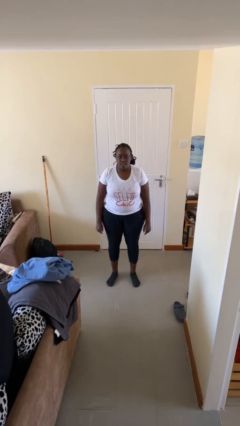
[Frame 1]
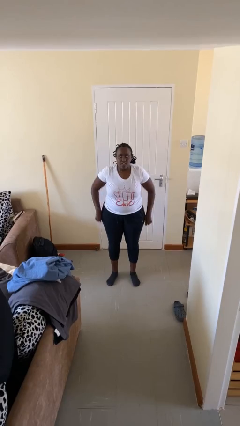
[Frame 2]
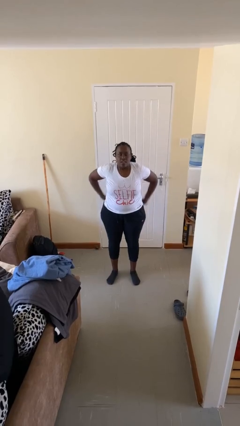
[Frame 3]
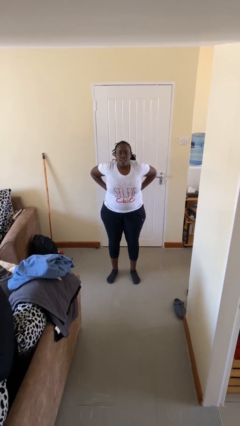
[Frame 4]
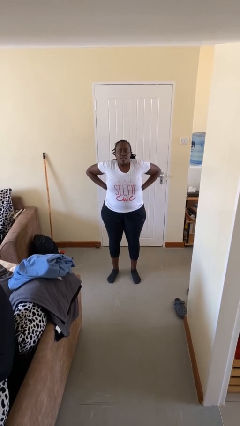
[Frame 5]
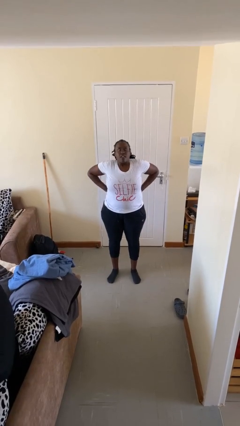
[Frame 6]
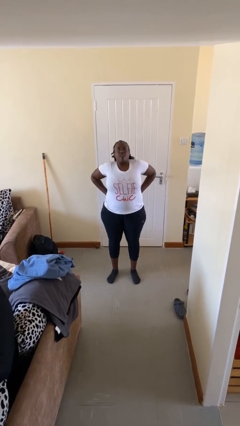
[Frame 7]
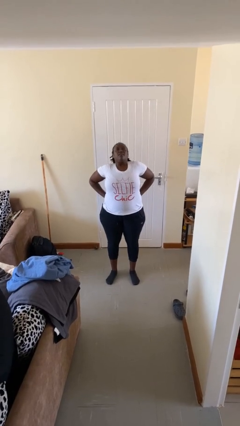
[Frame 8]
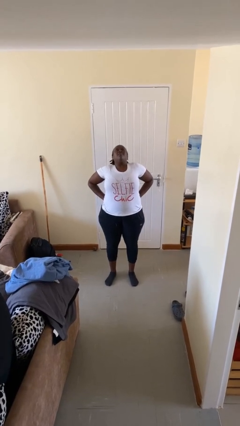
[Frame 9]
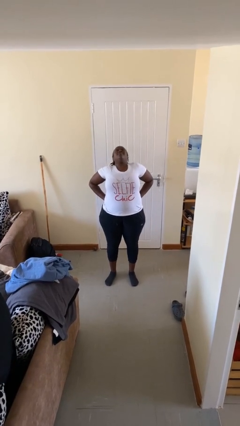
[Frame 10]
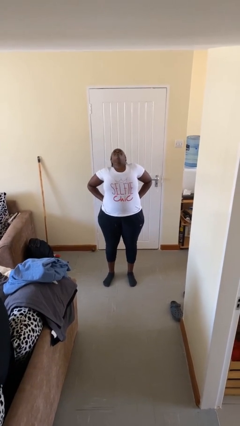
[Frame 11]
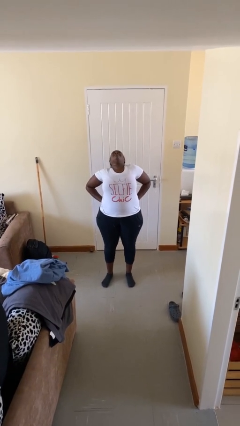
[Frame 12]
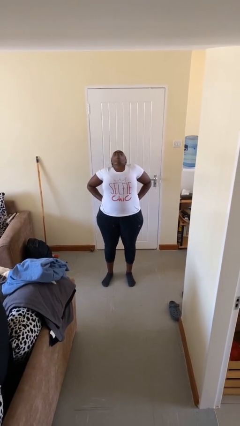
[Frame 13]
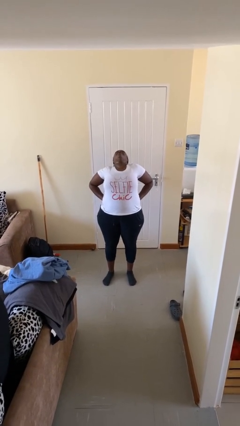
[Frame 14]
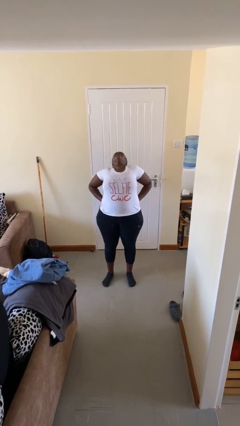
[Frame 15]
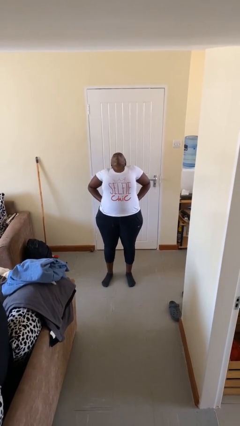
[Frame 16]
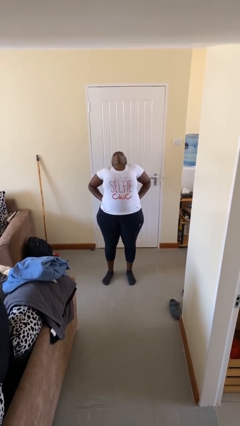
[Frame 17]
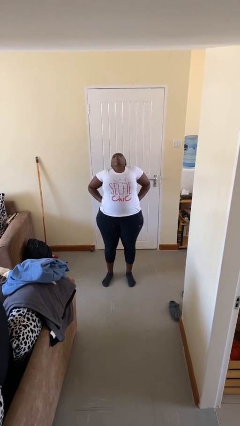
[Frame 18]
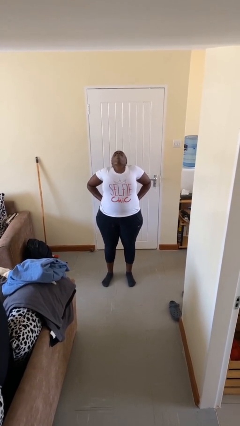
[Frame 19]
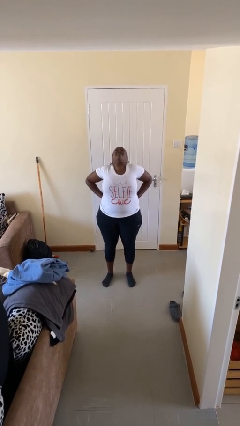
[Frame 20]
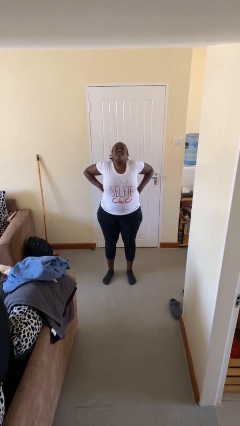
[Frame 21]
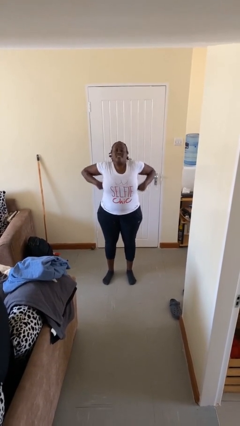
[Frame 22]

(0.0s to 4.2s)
person stretches back

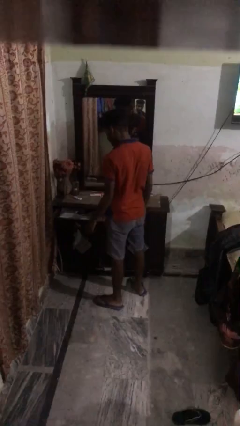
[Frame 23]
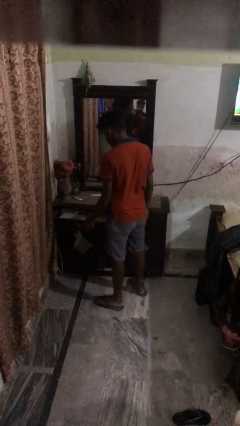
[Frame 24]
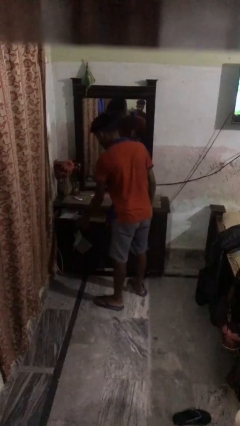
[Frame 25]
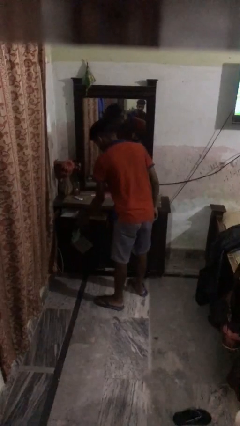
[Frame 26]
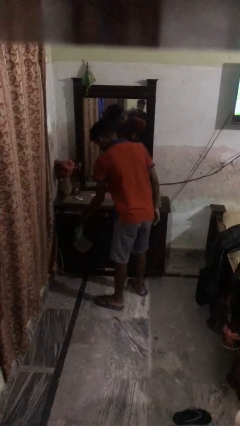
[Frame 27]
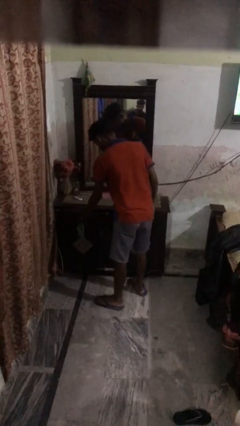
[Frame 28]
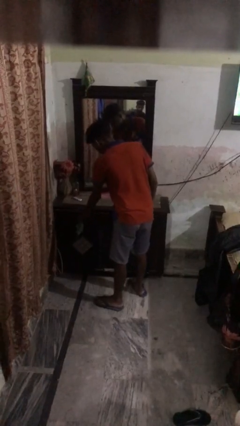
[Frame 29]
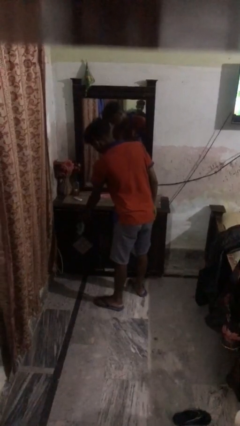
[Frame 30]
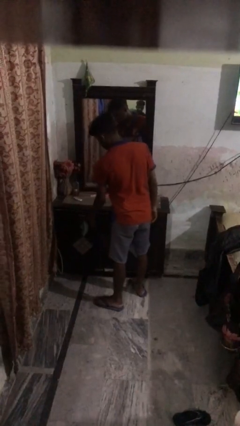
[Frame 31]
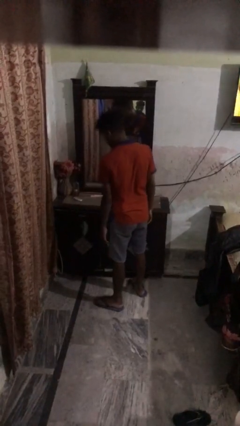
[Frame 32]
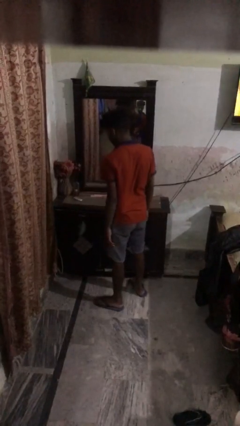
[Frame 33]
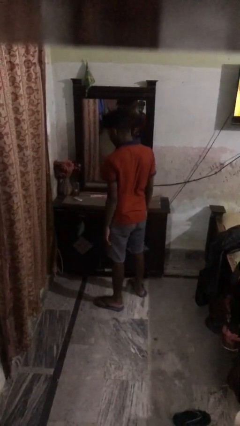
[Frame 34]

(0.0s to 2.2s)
person closes dresser drawer

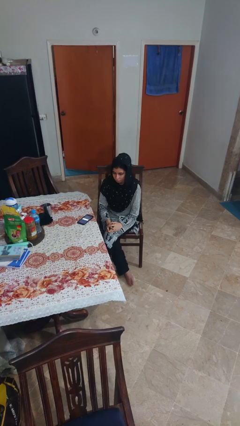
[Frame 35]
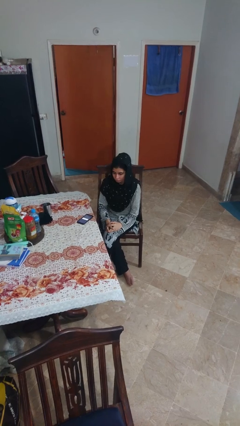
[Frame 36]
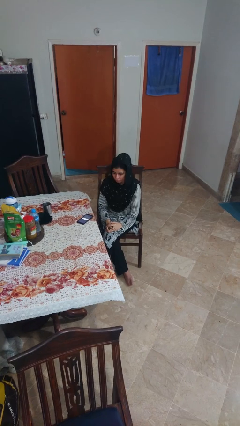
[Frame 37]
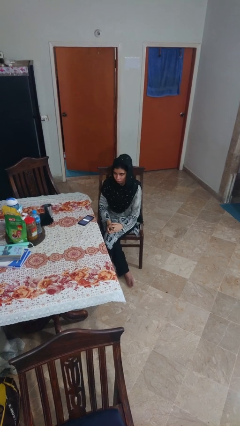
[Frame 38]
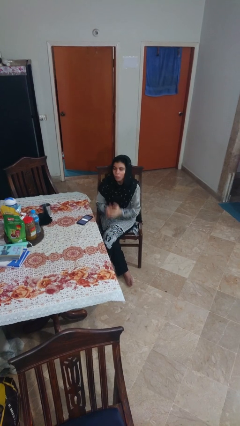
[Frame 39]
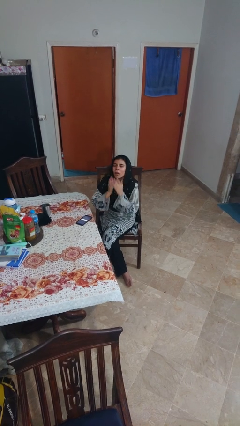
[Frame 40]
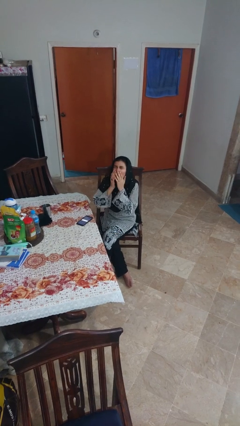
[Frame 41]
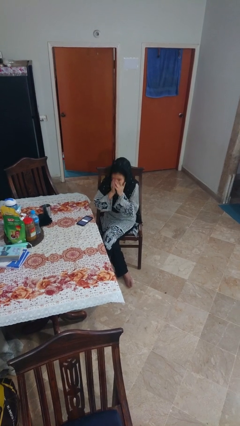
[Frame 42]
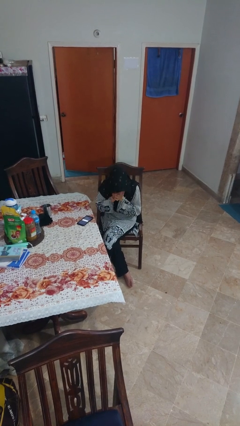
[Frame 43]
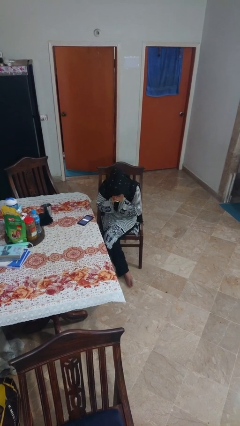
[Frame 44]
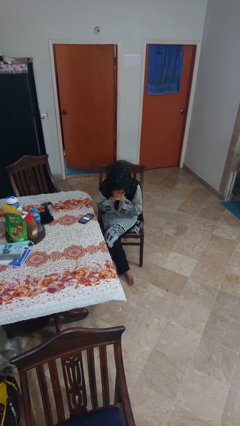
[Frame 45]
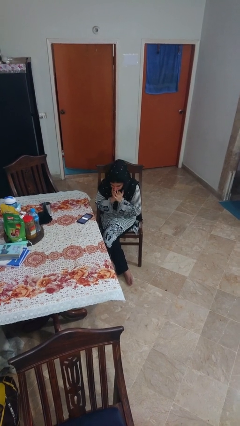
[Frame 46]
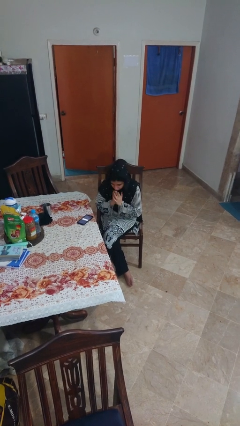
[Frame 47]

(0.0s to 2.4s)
person sneezes into hand

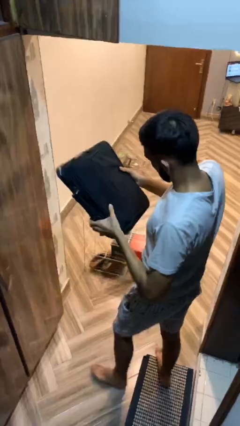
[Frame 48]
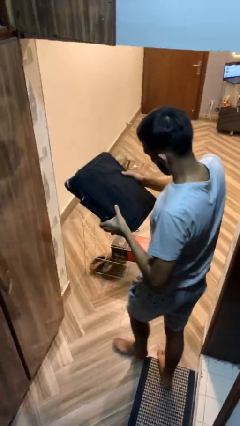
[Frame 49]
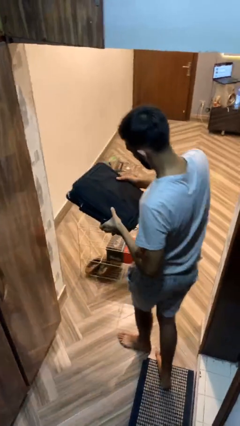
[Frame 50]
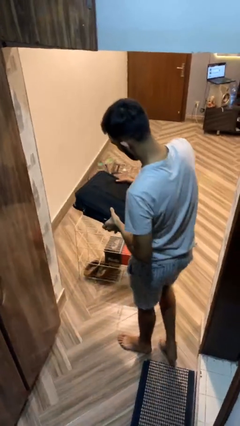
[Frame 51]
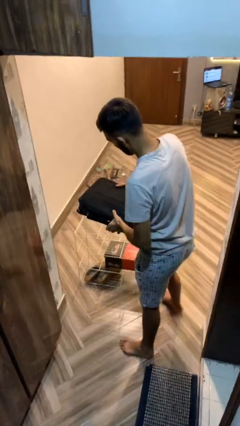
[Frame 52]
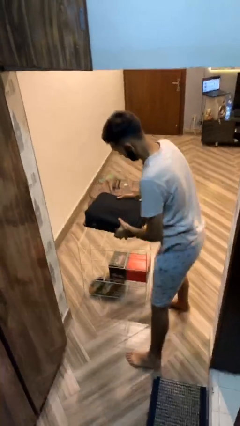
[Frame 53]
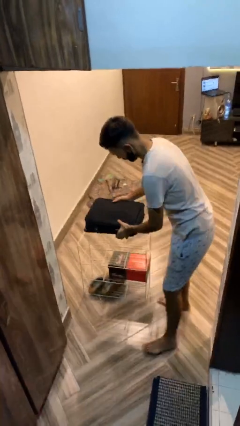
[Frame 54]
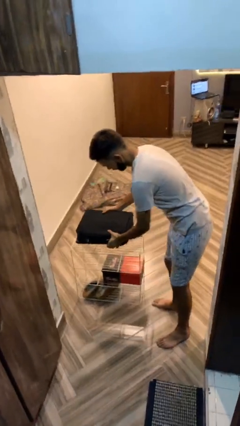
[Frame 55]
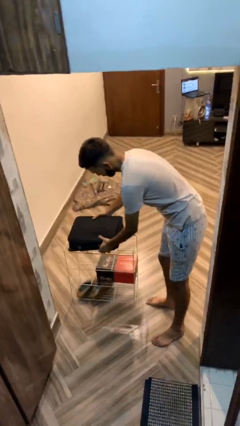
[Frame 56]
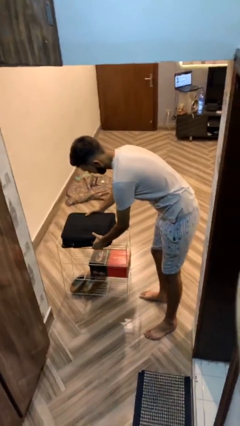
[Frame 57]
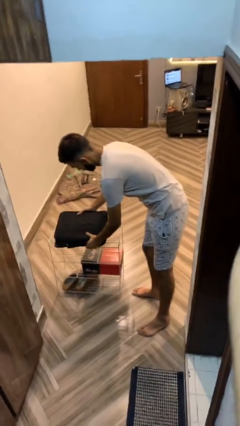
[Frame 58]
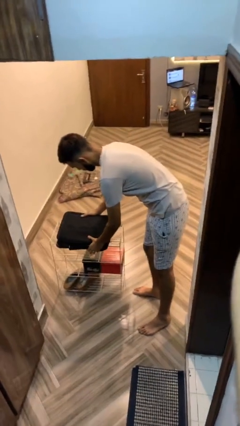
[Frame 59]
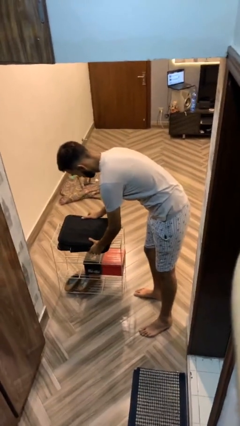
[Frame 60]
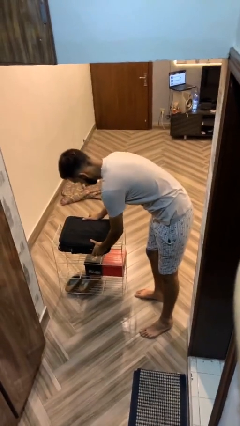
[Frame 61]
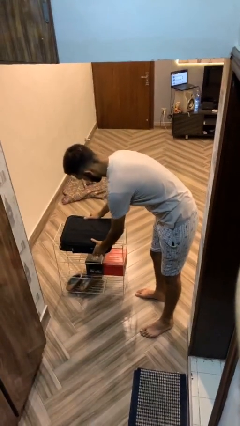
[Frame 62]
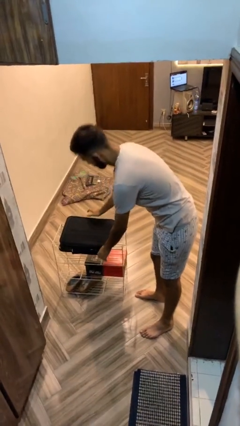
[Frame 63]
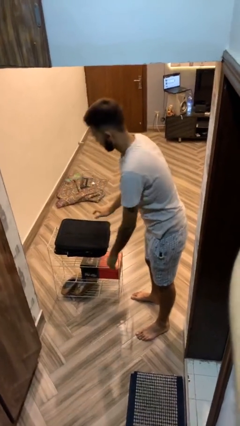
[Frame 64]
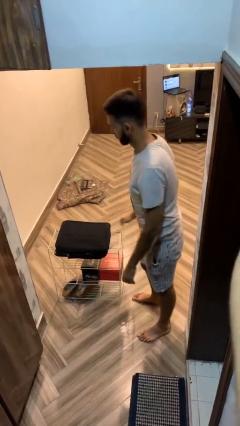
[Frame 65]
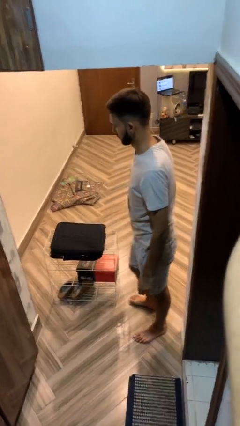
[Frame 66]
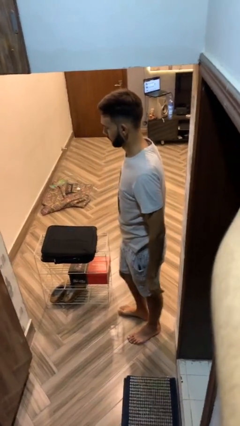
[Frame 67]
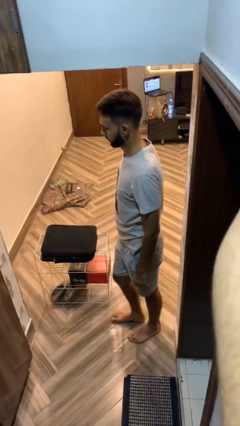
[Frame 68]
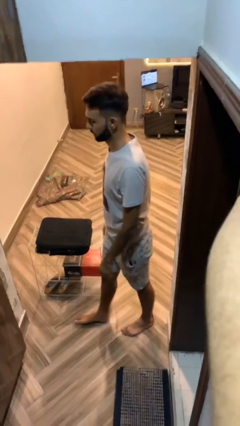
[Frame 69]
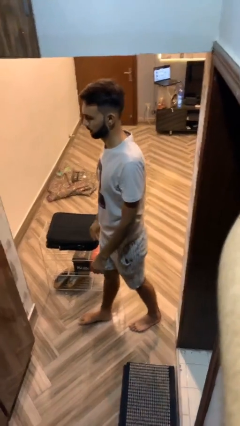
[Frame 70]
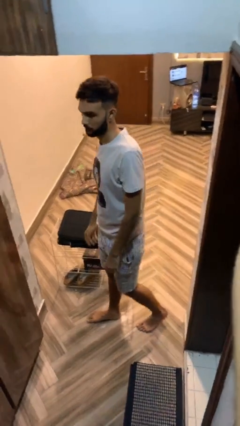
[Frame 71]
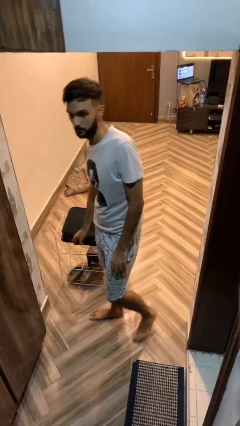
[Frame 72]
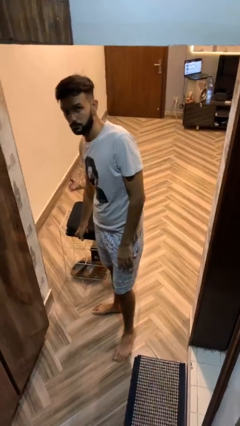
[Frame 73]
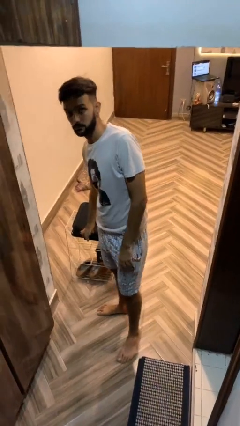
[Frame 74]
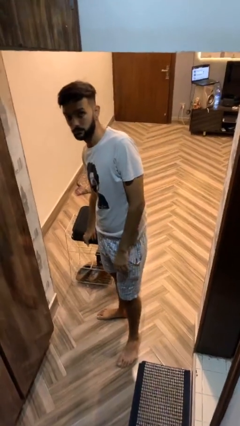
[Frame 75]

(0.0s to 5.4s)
person puts down object on table

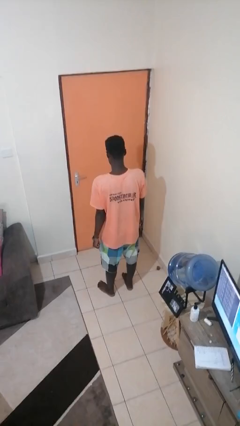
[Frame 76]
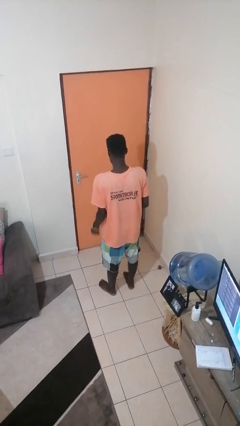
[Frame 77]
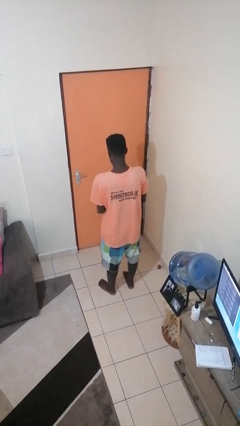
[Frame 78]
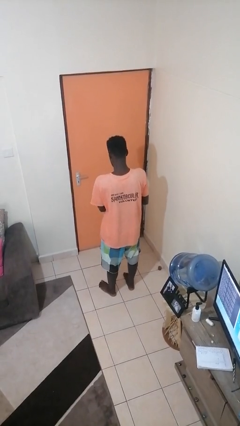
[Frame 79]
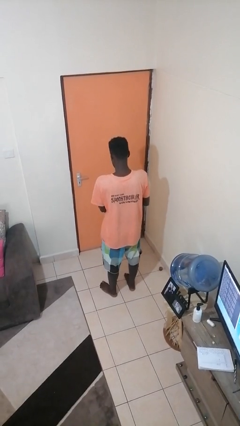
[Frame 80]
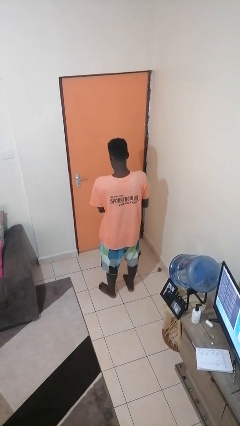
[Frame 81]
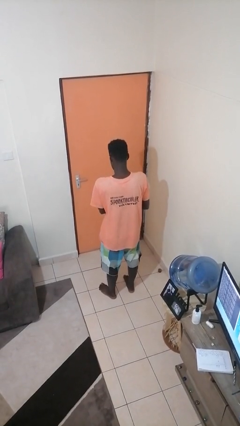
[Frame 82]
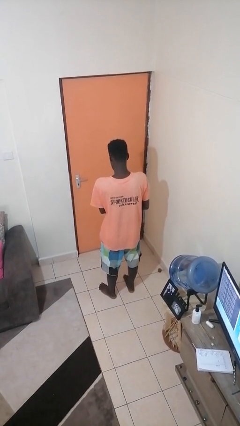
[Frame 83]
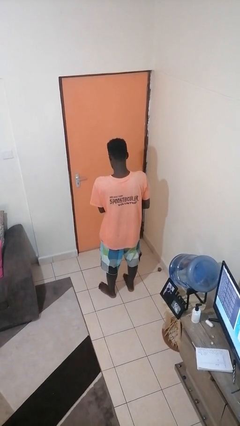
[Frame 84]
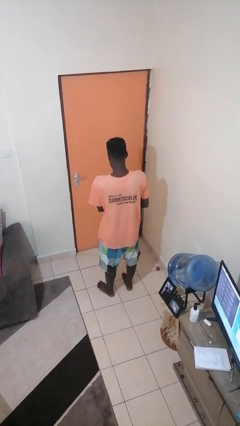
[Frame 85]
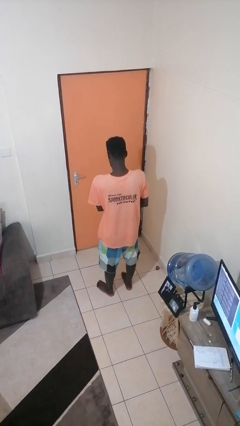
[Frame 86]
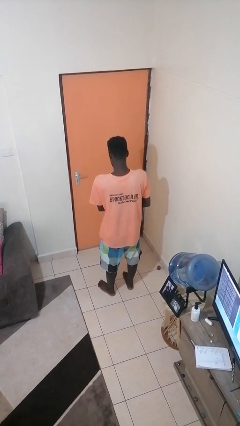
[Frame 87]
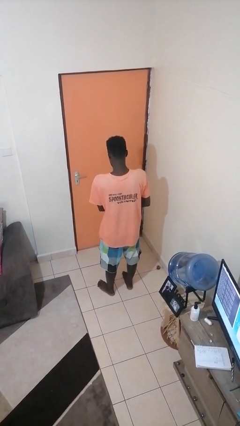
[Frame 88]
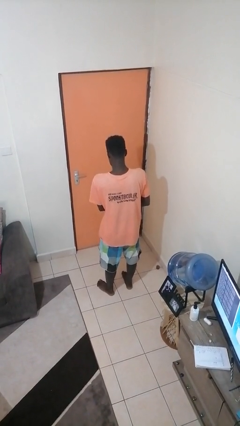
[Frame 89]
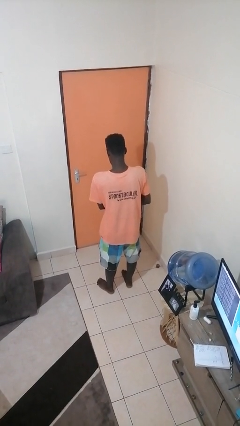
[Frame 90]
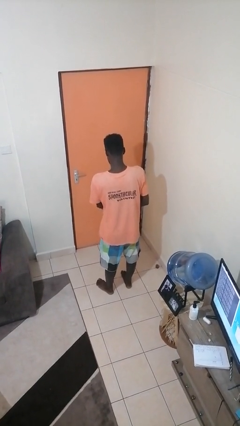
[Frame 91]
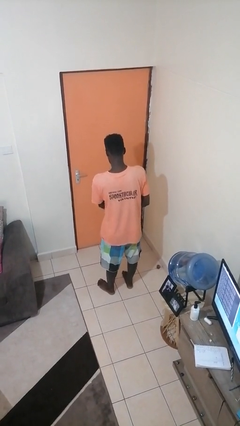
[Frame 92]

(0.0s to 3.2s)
person takes off wristwatch
